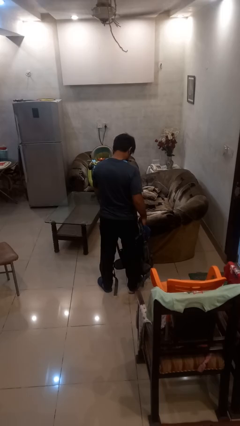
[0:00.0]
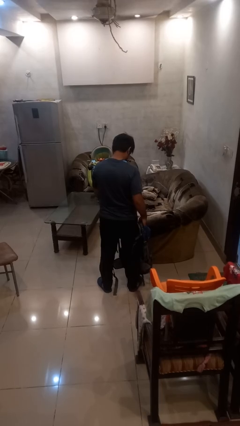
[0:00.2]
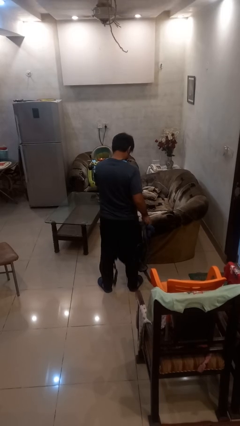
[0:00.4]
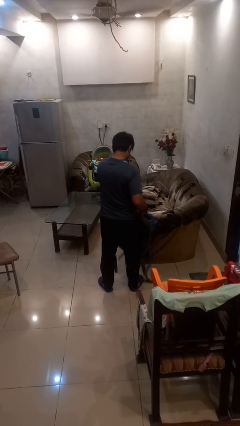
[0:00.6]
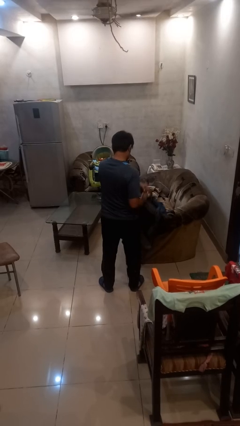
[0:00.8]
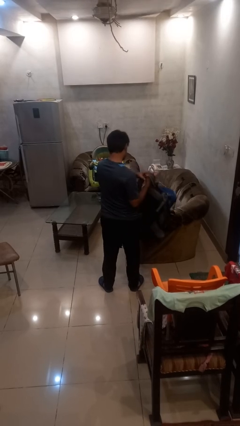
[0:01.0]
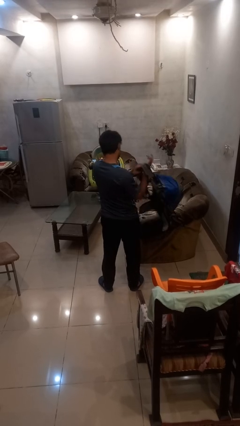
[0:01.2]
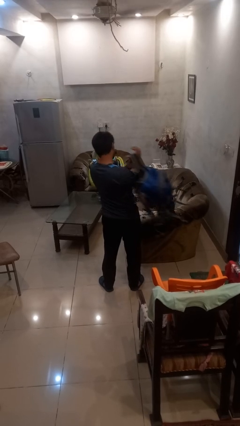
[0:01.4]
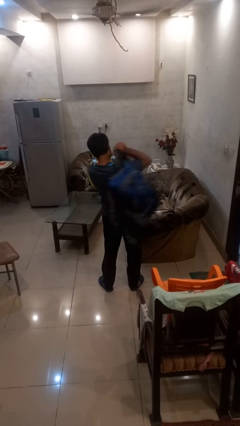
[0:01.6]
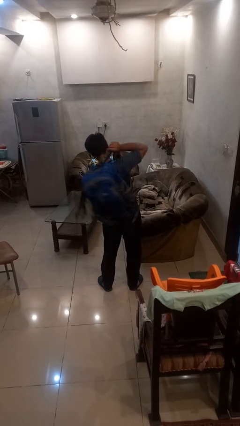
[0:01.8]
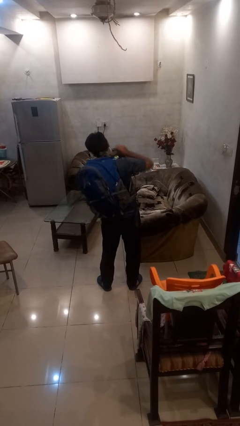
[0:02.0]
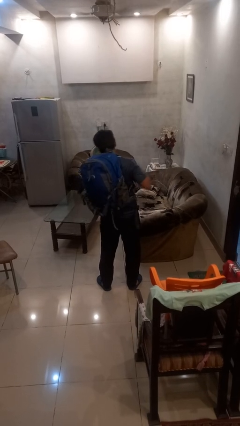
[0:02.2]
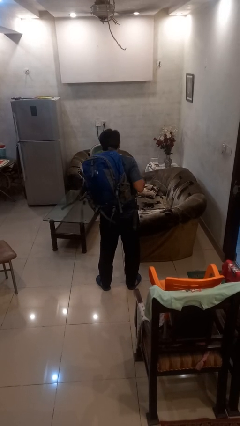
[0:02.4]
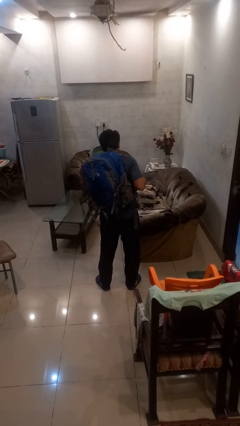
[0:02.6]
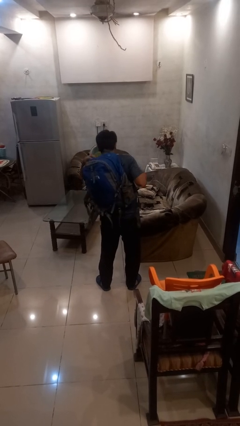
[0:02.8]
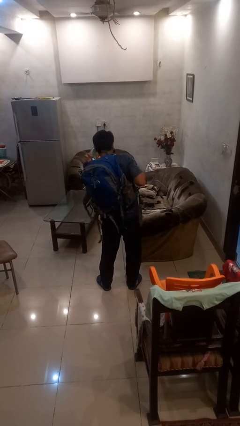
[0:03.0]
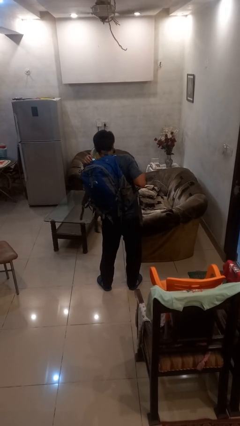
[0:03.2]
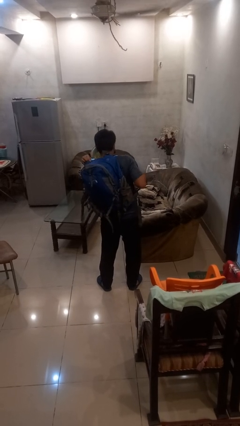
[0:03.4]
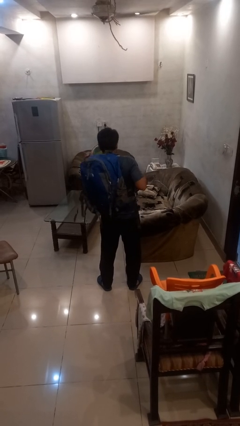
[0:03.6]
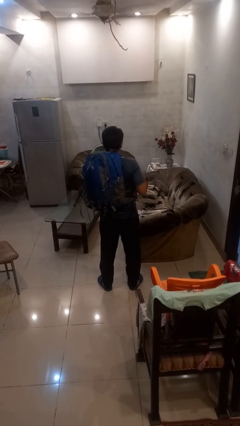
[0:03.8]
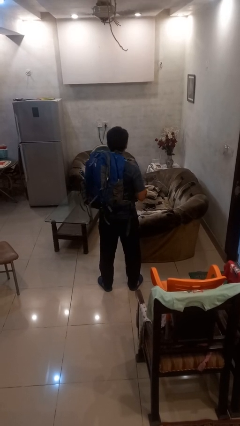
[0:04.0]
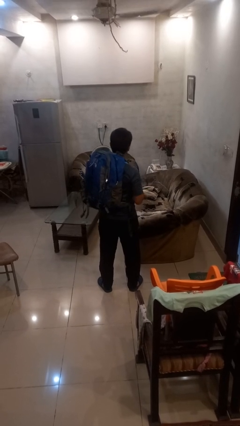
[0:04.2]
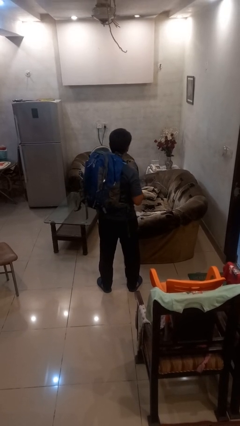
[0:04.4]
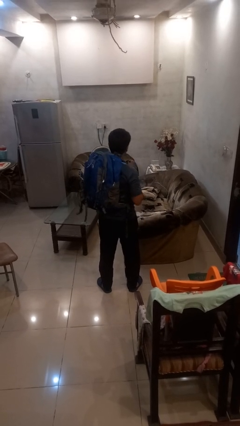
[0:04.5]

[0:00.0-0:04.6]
person puts on backpack

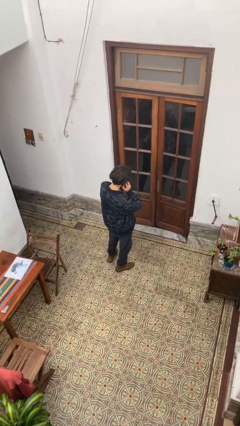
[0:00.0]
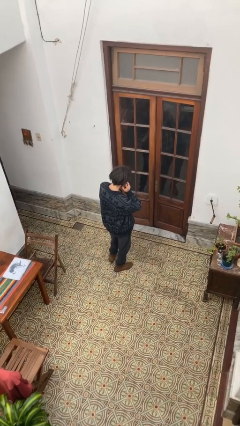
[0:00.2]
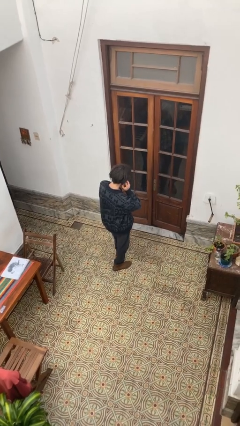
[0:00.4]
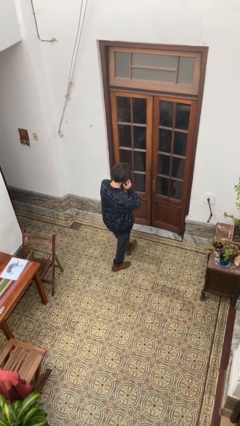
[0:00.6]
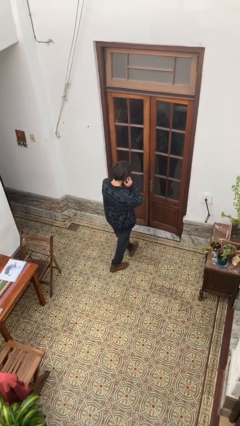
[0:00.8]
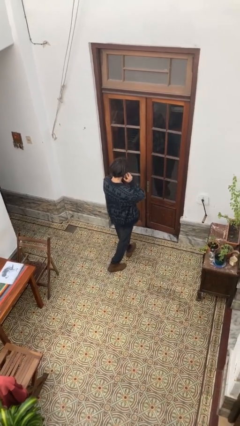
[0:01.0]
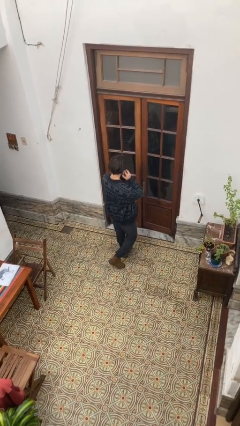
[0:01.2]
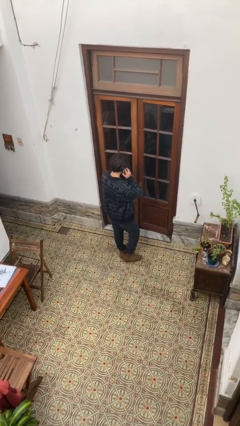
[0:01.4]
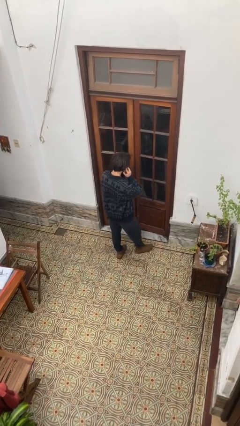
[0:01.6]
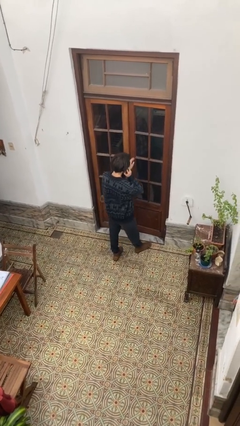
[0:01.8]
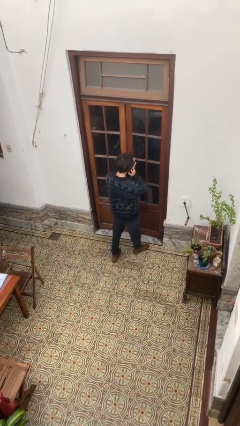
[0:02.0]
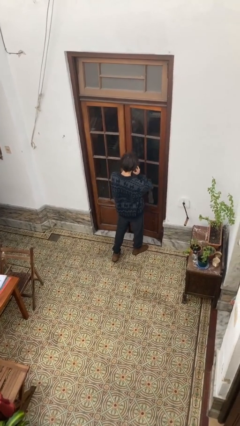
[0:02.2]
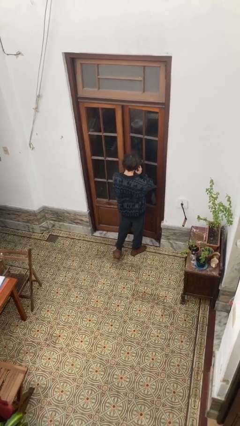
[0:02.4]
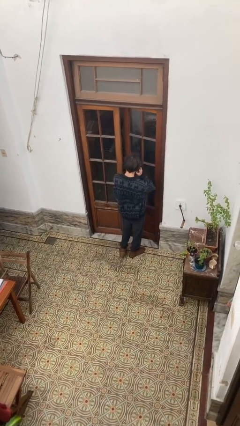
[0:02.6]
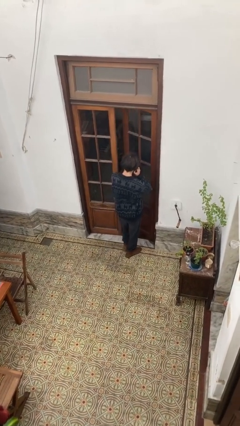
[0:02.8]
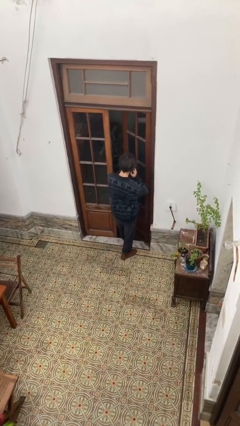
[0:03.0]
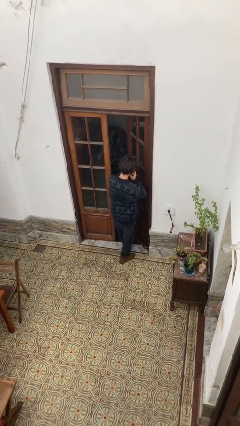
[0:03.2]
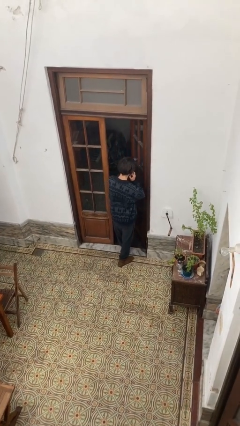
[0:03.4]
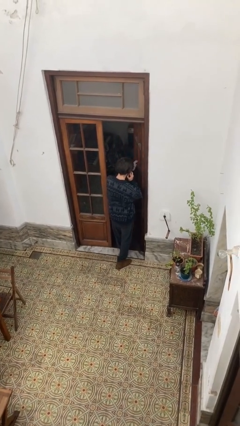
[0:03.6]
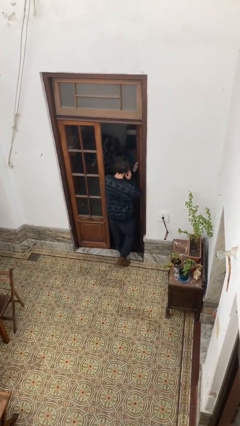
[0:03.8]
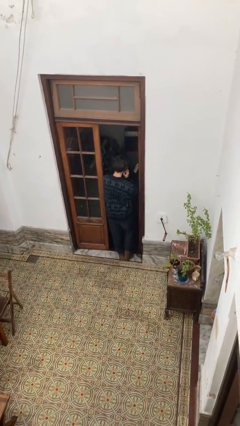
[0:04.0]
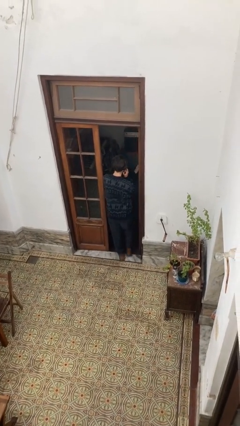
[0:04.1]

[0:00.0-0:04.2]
person opens facility door

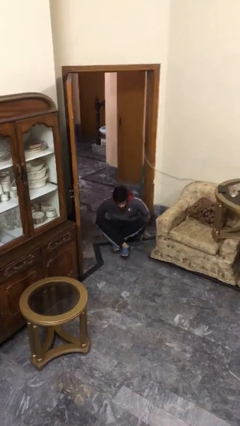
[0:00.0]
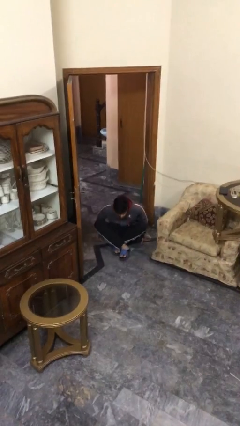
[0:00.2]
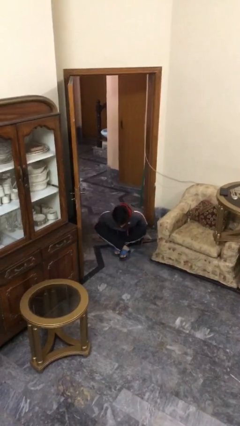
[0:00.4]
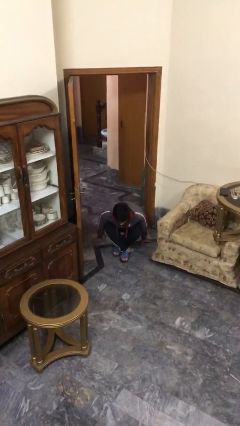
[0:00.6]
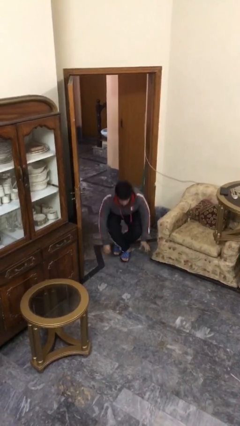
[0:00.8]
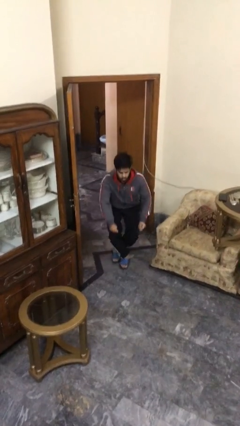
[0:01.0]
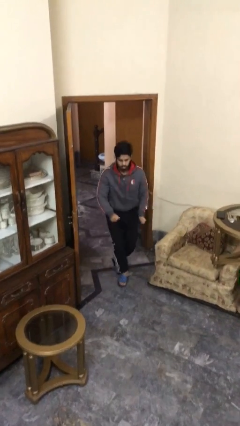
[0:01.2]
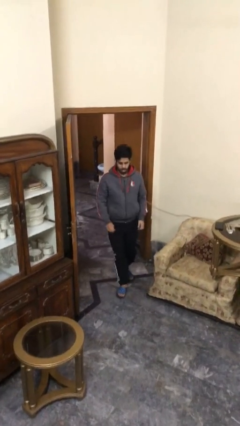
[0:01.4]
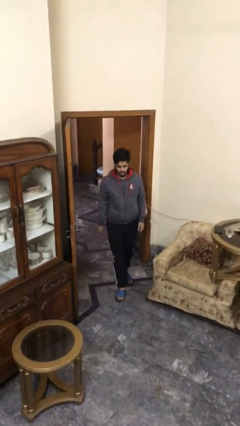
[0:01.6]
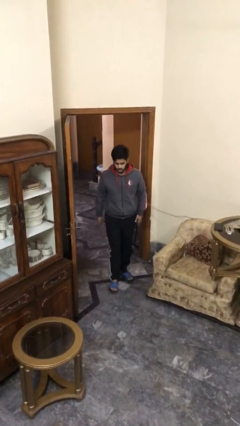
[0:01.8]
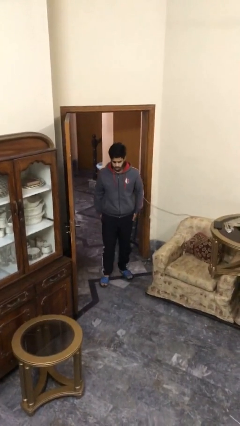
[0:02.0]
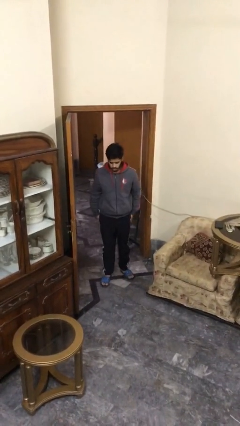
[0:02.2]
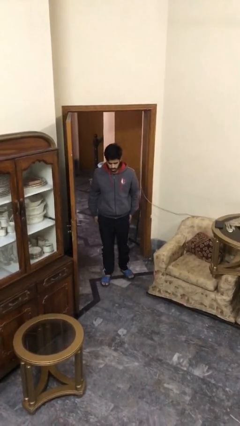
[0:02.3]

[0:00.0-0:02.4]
person stands up

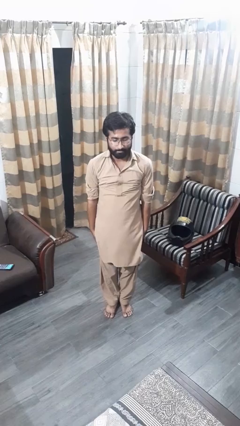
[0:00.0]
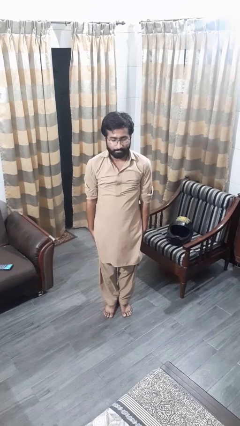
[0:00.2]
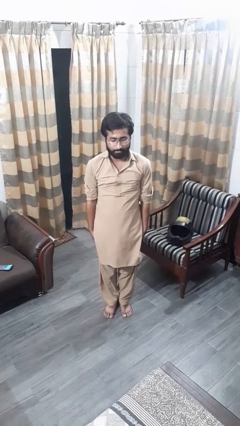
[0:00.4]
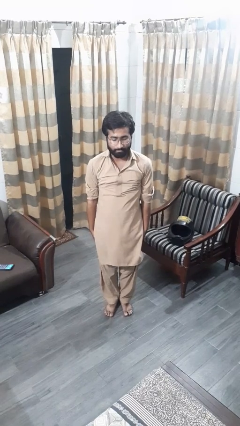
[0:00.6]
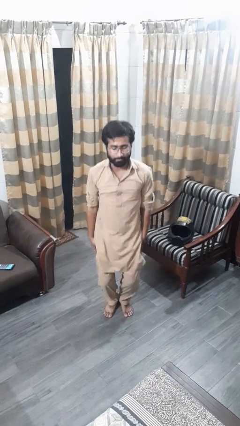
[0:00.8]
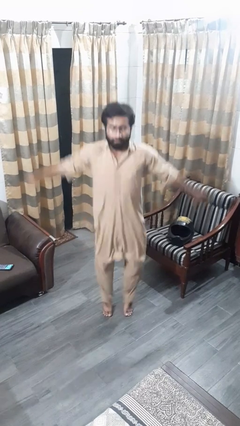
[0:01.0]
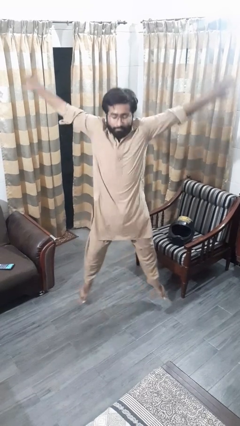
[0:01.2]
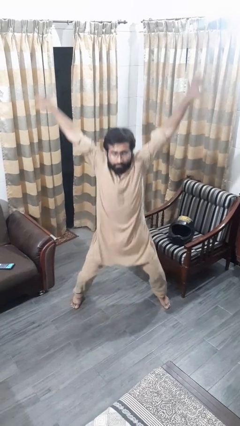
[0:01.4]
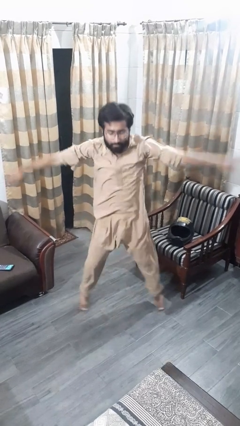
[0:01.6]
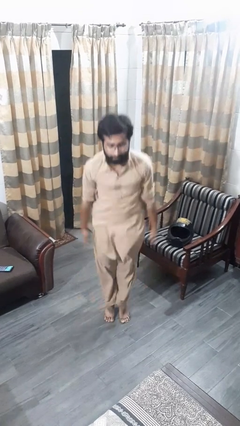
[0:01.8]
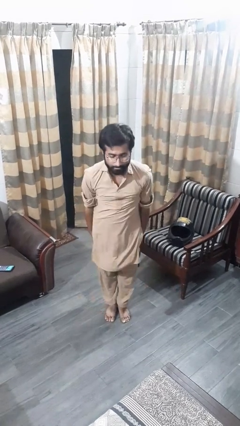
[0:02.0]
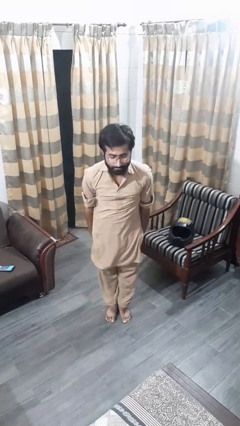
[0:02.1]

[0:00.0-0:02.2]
person exercises with jumping jacks

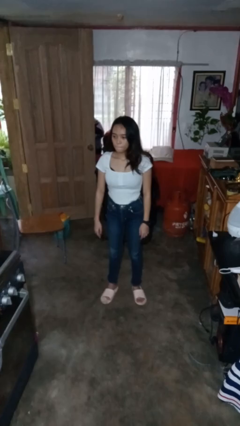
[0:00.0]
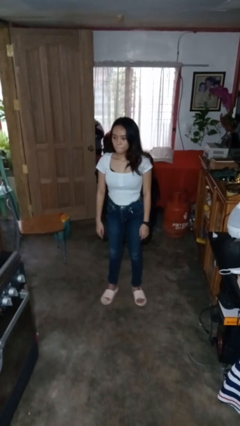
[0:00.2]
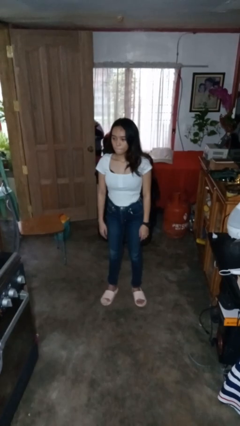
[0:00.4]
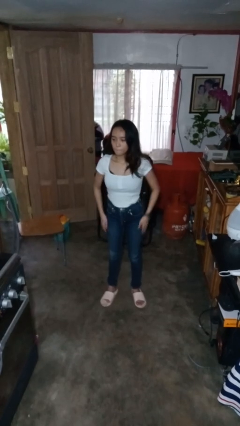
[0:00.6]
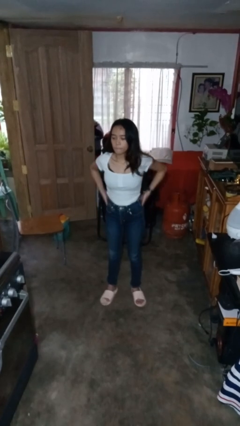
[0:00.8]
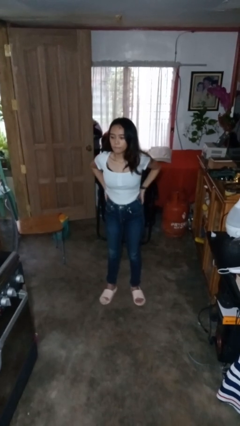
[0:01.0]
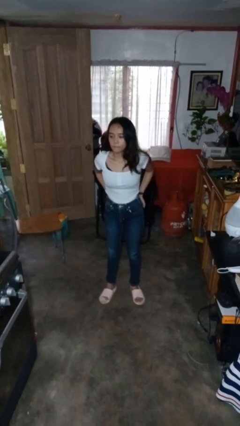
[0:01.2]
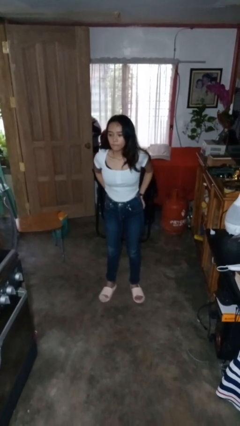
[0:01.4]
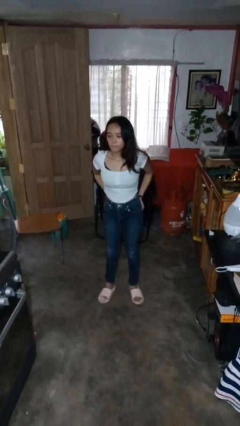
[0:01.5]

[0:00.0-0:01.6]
person puts hands in back pockets

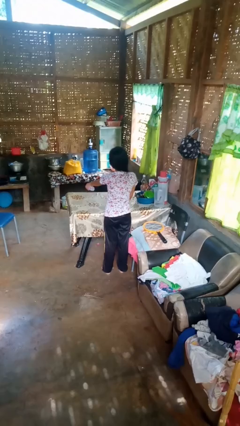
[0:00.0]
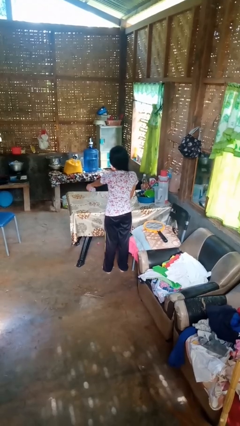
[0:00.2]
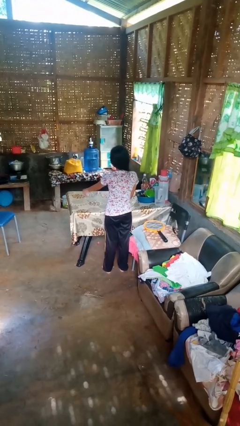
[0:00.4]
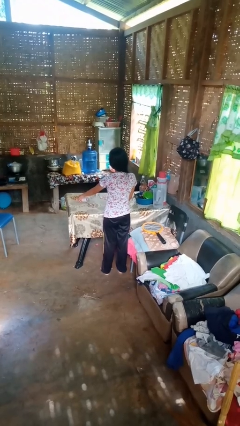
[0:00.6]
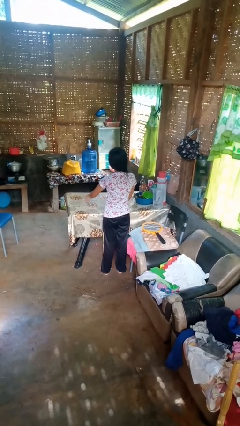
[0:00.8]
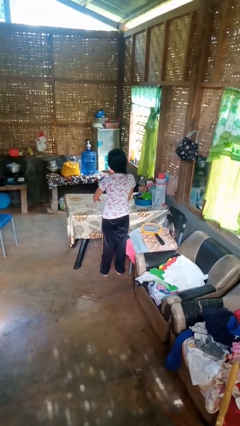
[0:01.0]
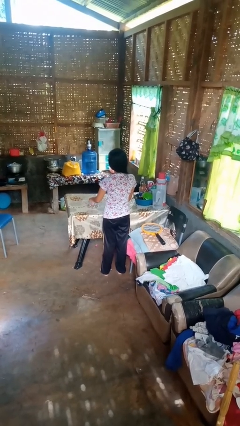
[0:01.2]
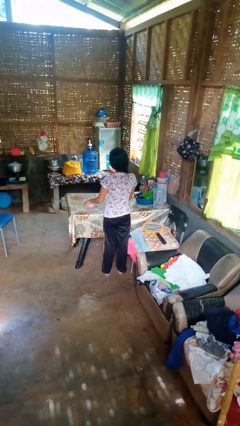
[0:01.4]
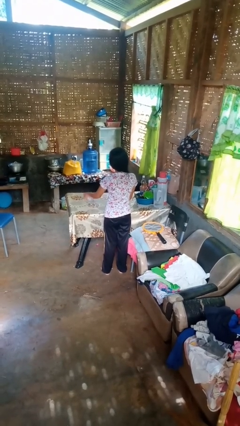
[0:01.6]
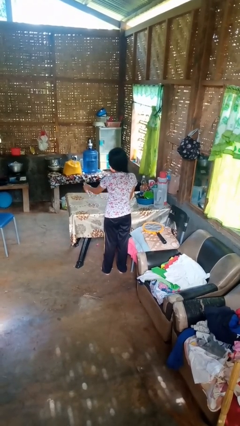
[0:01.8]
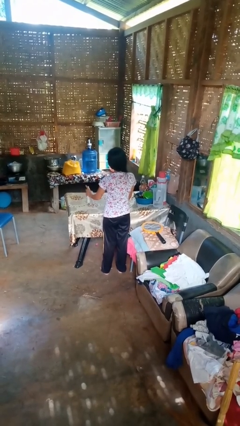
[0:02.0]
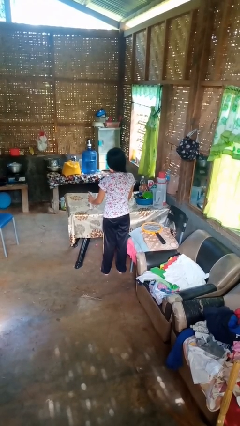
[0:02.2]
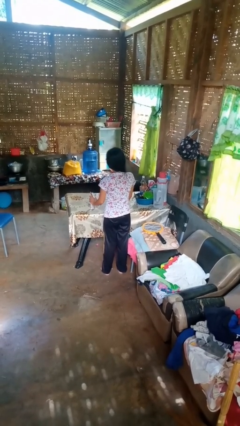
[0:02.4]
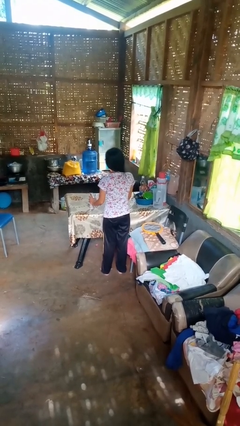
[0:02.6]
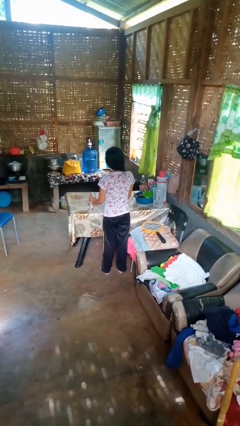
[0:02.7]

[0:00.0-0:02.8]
person sprays from bottle
